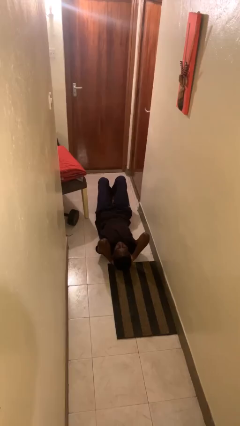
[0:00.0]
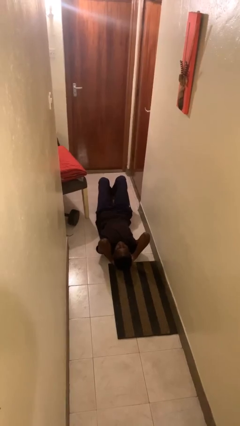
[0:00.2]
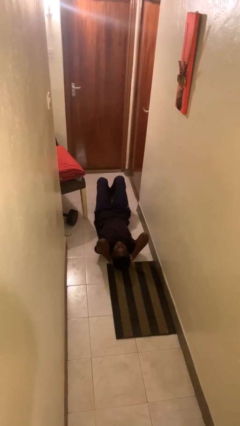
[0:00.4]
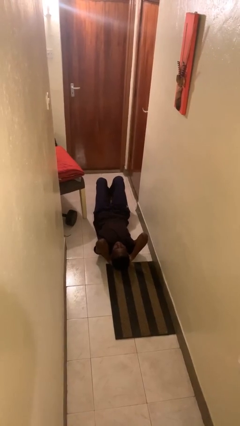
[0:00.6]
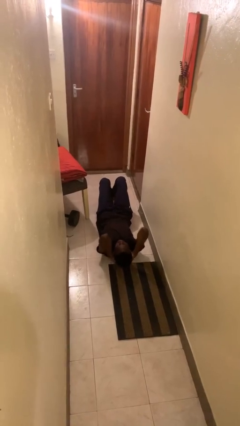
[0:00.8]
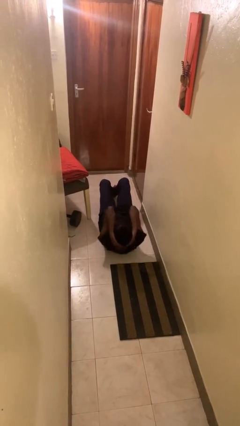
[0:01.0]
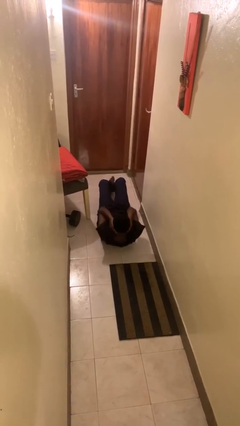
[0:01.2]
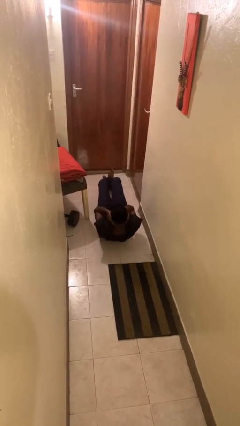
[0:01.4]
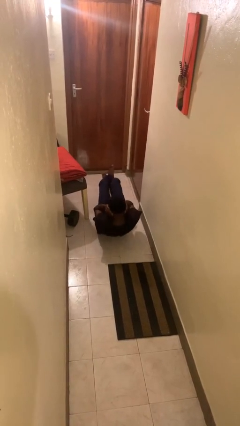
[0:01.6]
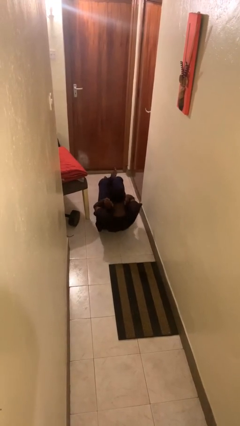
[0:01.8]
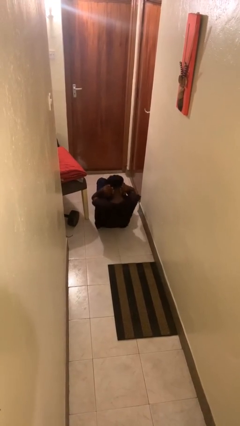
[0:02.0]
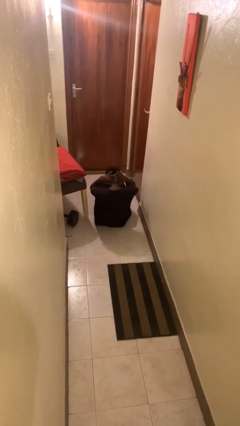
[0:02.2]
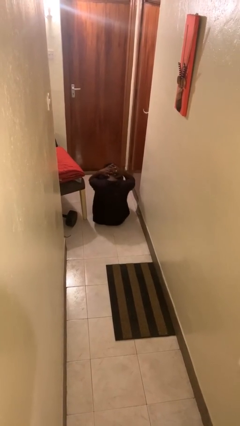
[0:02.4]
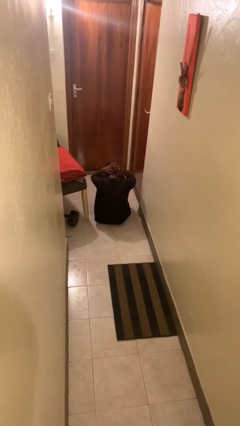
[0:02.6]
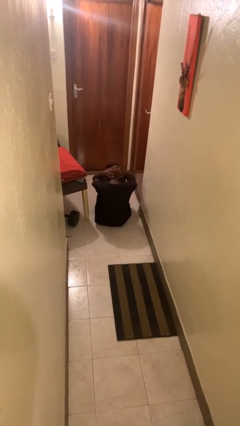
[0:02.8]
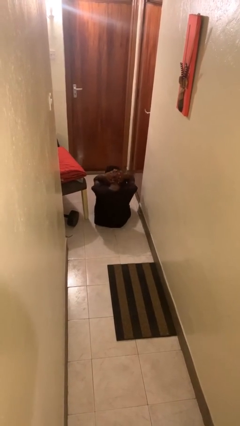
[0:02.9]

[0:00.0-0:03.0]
person exercises with situp

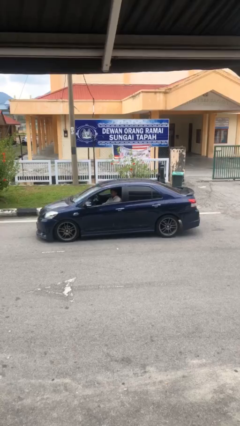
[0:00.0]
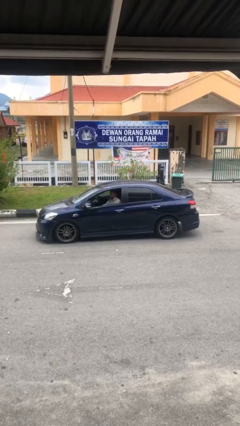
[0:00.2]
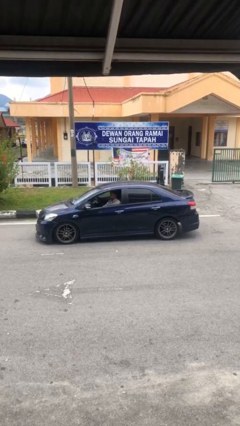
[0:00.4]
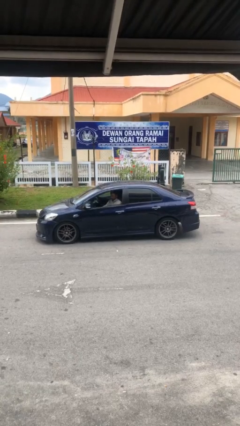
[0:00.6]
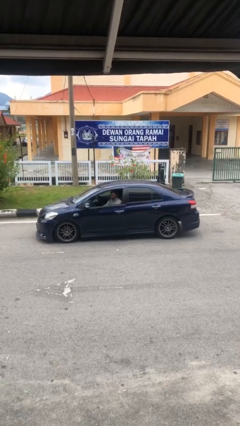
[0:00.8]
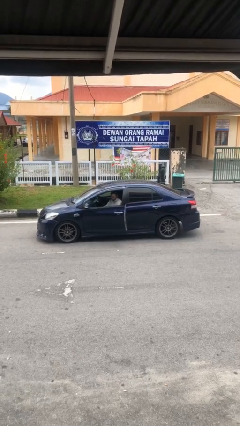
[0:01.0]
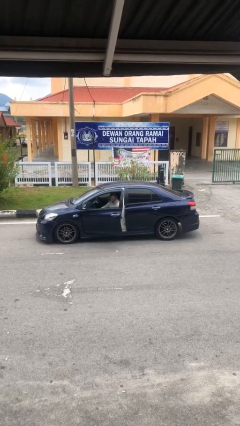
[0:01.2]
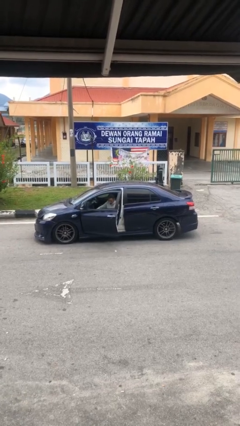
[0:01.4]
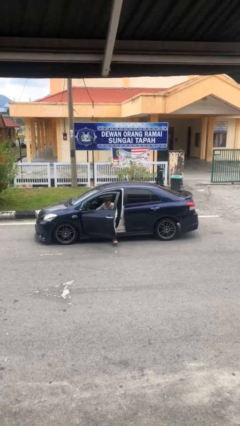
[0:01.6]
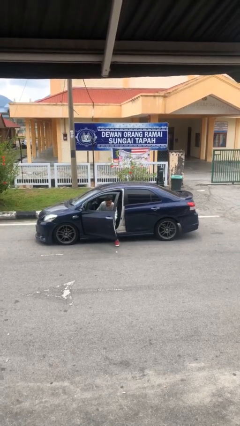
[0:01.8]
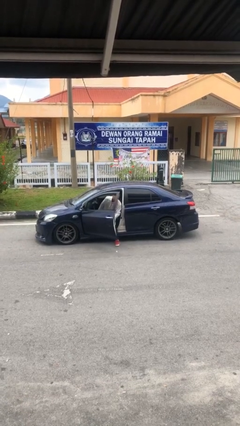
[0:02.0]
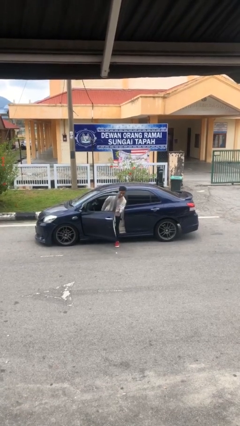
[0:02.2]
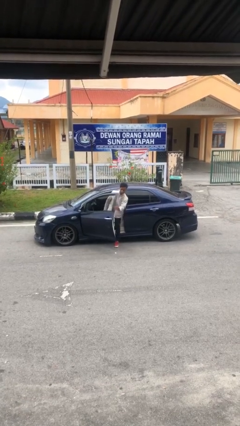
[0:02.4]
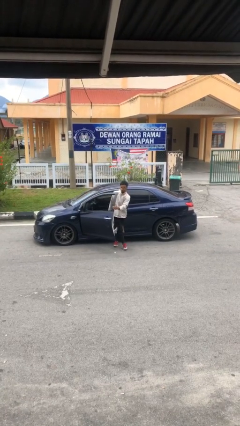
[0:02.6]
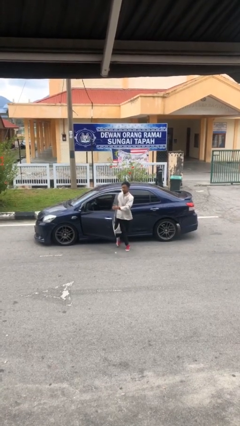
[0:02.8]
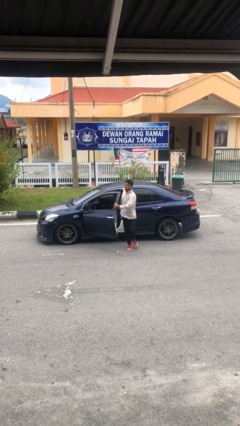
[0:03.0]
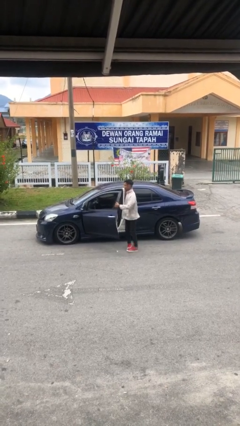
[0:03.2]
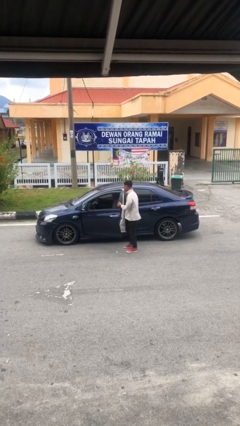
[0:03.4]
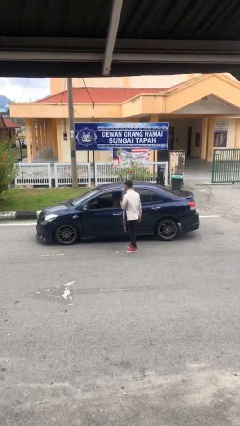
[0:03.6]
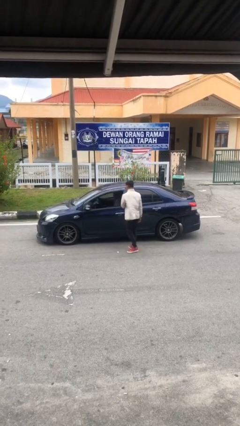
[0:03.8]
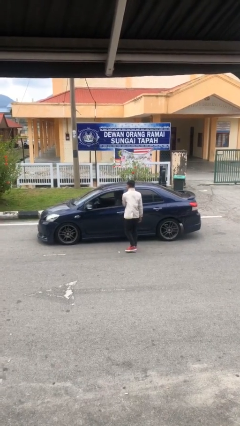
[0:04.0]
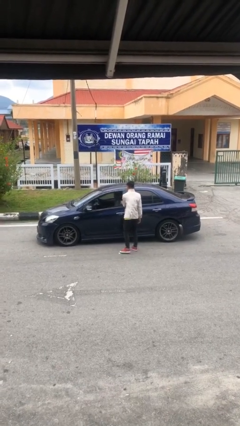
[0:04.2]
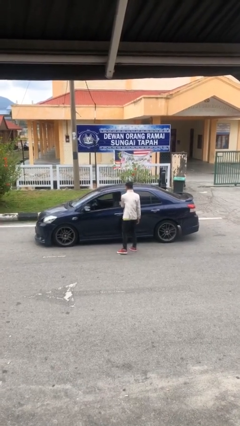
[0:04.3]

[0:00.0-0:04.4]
car drops off person

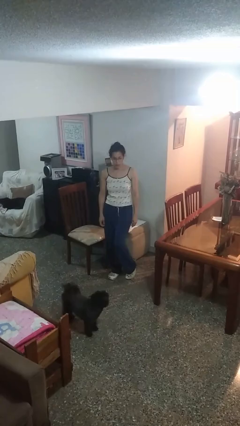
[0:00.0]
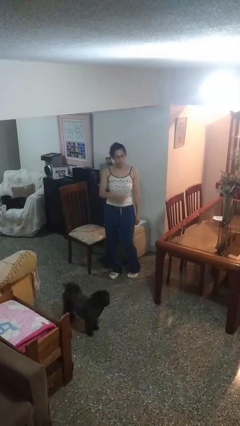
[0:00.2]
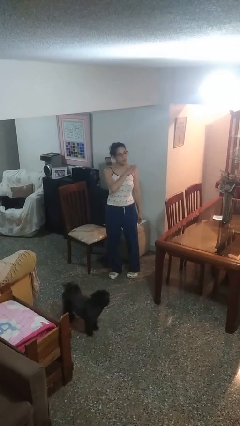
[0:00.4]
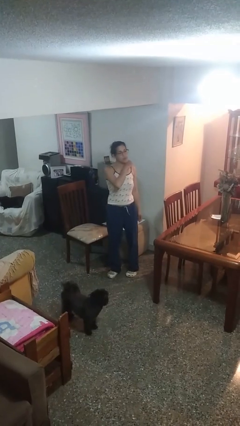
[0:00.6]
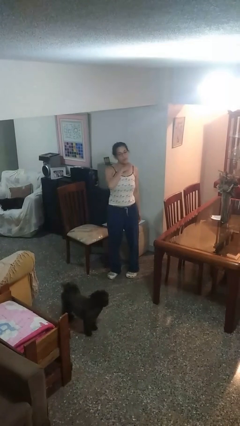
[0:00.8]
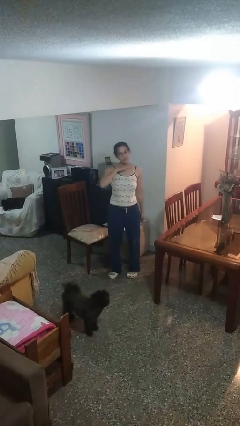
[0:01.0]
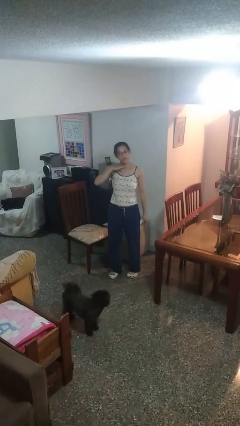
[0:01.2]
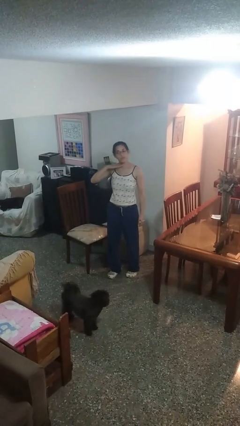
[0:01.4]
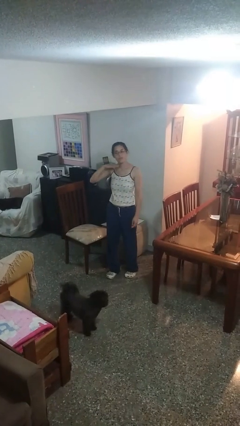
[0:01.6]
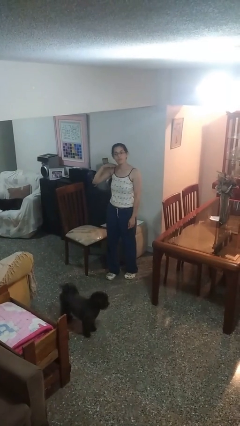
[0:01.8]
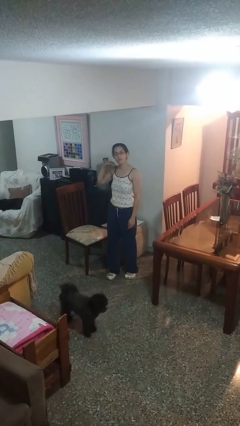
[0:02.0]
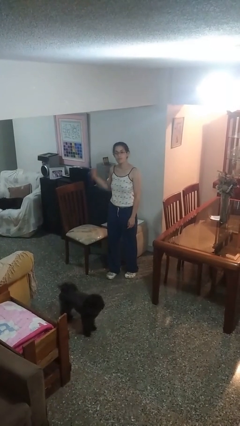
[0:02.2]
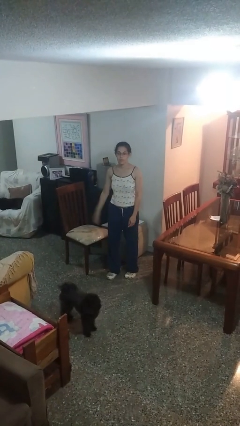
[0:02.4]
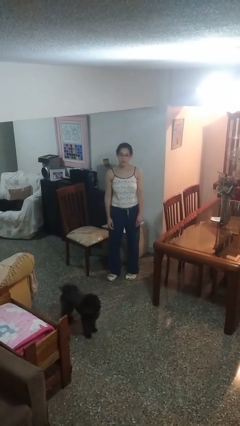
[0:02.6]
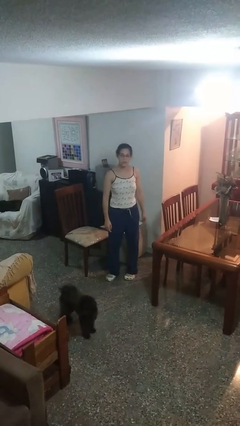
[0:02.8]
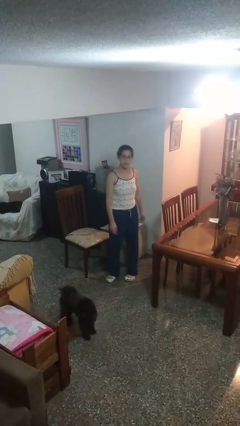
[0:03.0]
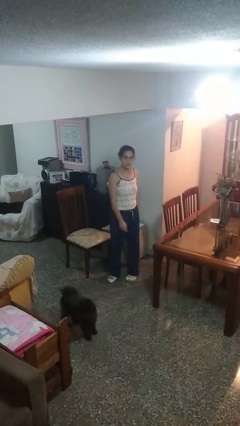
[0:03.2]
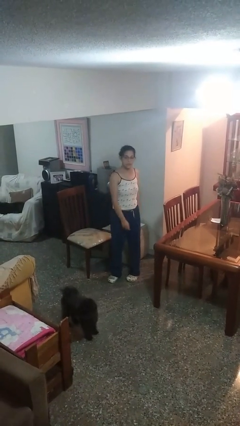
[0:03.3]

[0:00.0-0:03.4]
person gestures cut

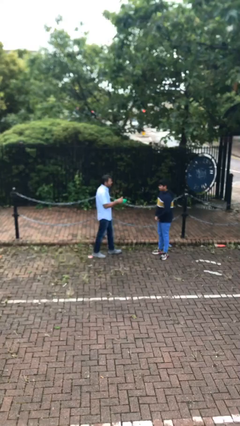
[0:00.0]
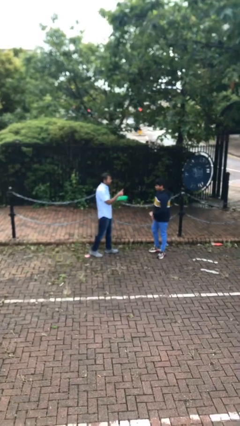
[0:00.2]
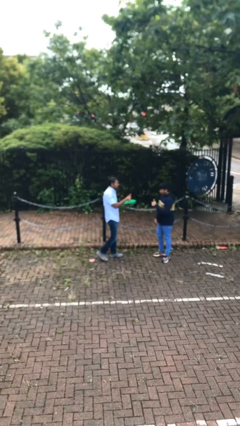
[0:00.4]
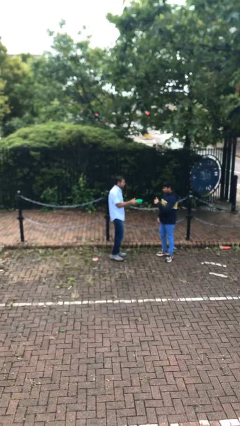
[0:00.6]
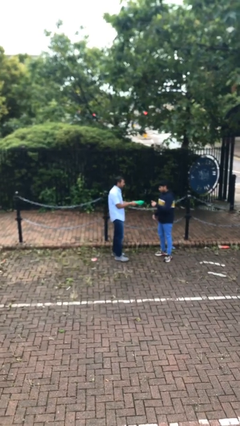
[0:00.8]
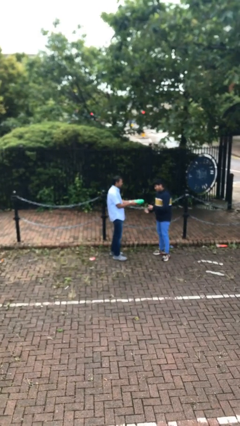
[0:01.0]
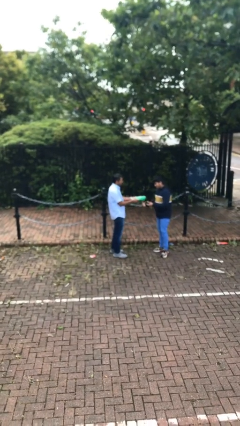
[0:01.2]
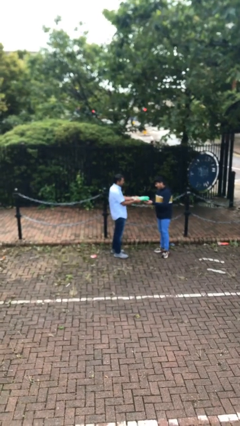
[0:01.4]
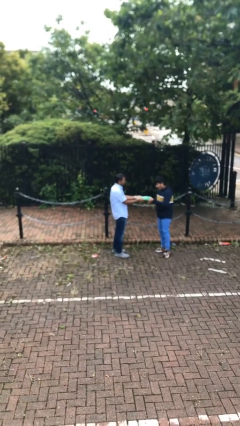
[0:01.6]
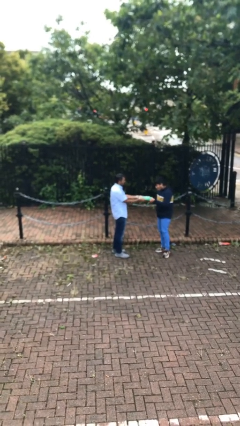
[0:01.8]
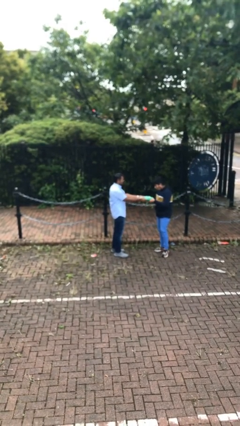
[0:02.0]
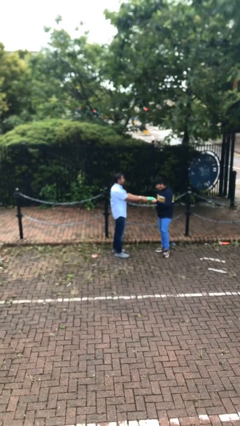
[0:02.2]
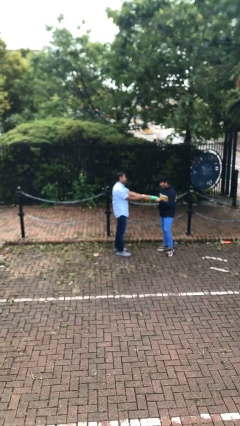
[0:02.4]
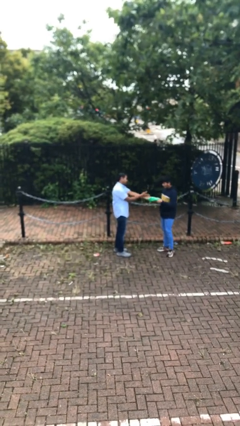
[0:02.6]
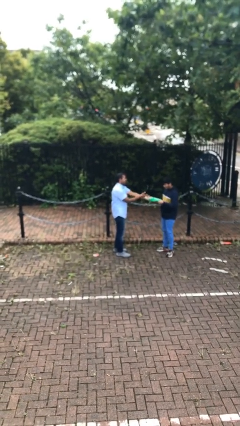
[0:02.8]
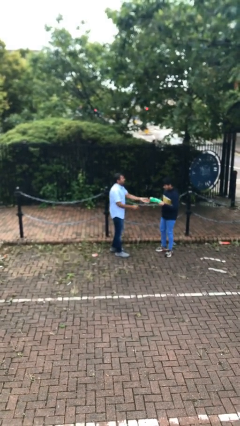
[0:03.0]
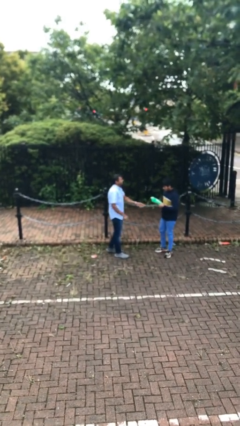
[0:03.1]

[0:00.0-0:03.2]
person transfers object to person

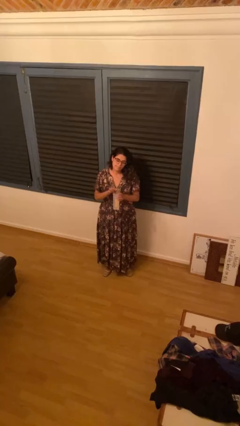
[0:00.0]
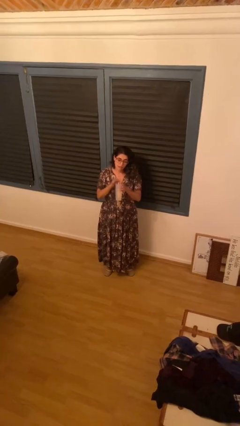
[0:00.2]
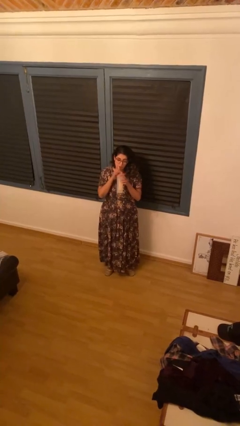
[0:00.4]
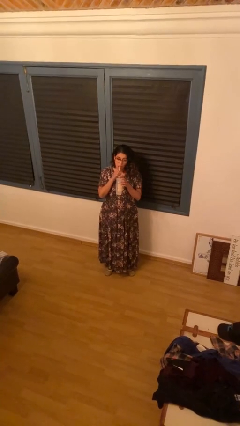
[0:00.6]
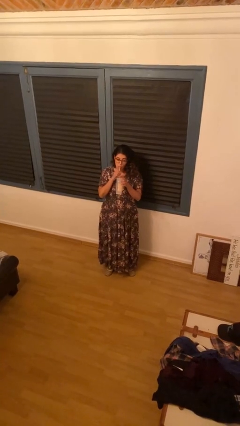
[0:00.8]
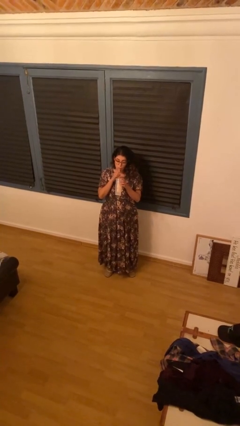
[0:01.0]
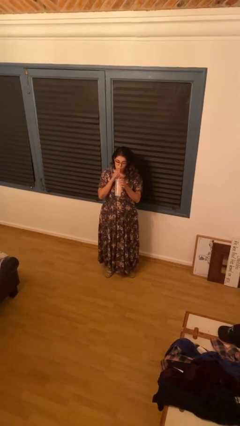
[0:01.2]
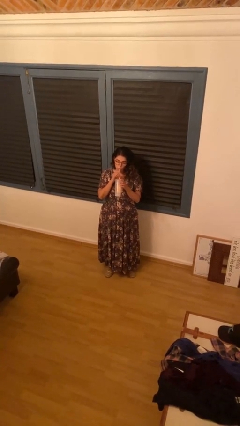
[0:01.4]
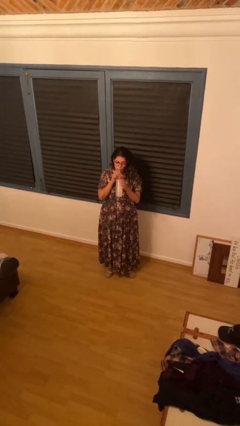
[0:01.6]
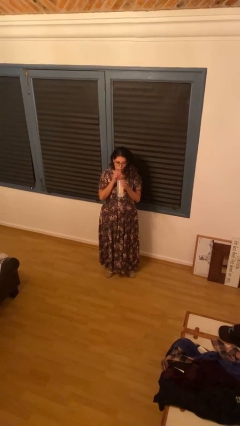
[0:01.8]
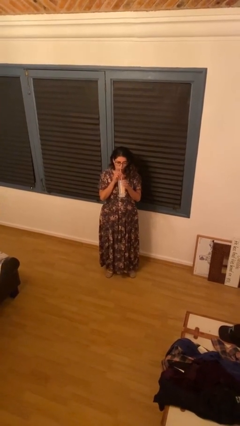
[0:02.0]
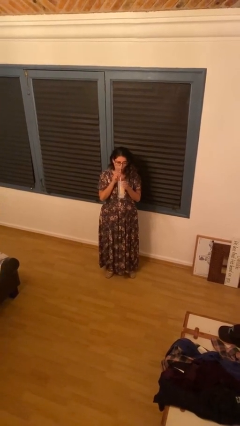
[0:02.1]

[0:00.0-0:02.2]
person drinks from straw

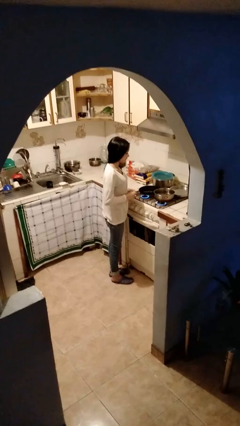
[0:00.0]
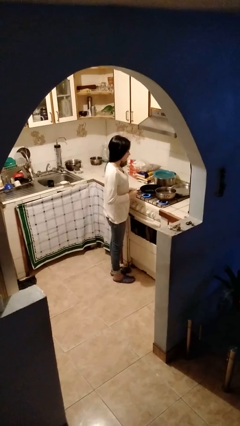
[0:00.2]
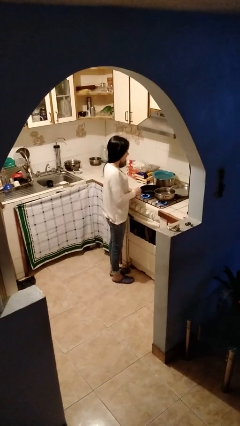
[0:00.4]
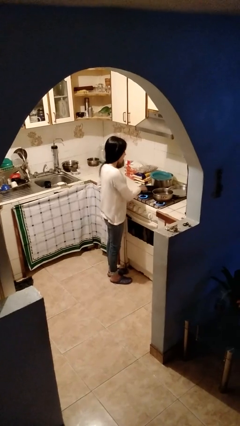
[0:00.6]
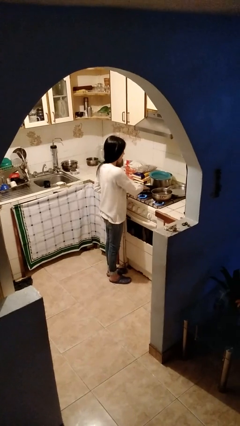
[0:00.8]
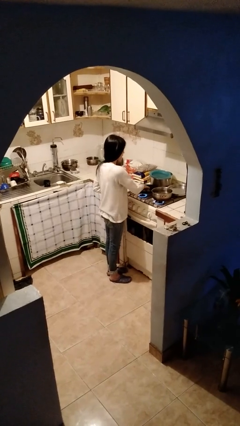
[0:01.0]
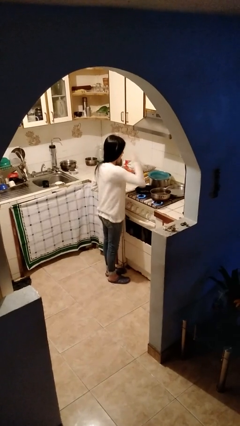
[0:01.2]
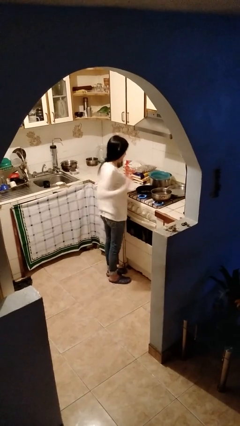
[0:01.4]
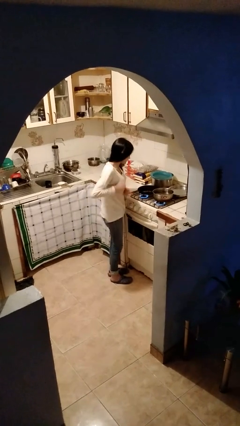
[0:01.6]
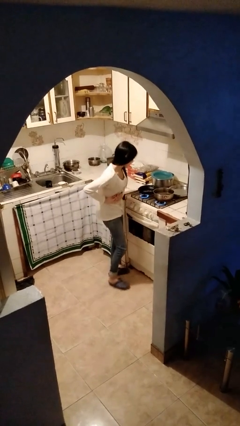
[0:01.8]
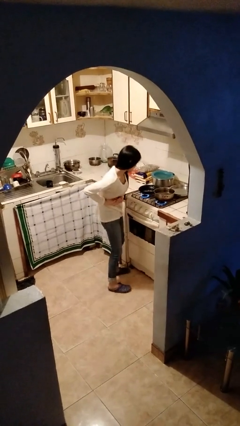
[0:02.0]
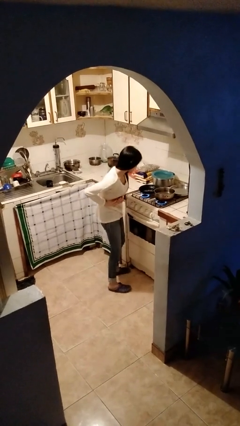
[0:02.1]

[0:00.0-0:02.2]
person burns hand
